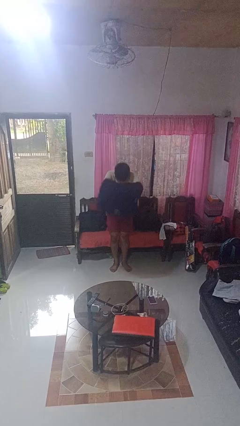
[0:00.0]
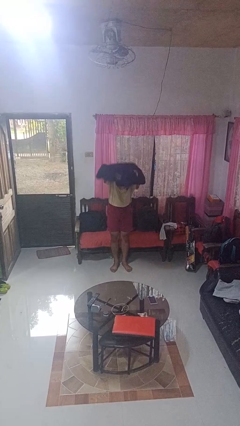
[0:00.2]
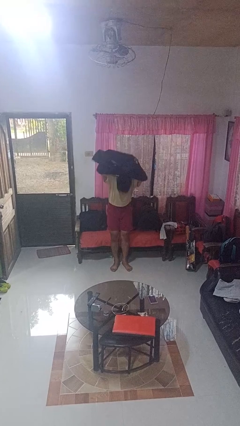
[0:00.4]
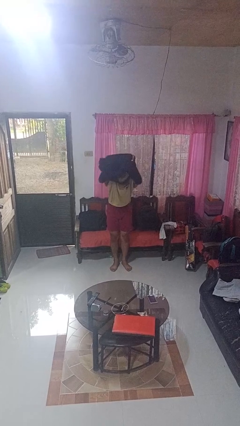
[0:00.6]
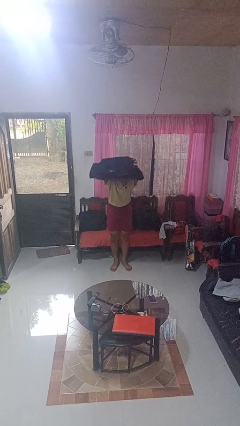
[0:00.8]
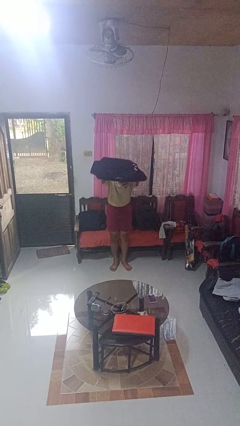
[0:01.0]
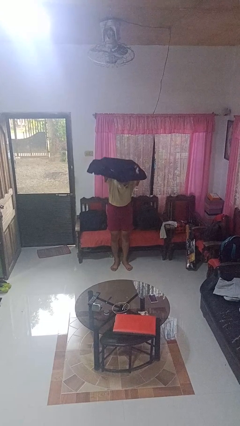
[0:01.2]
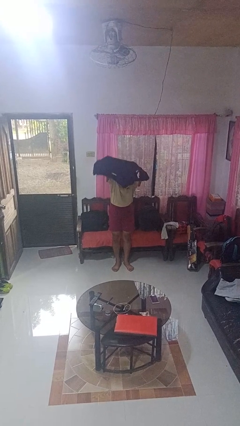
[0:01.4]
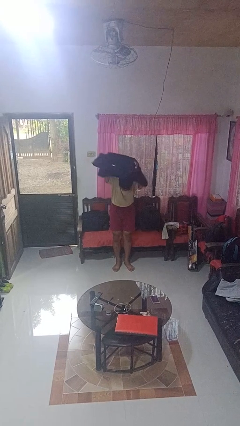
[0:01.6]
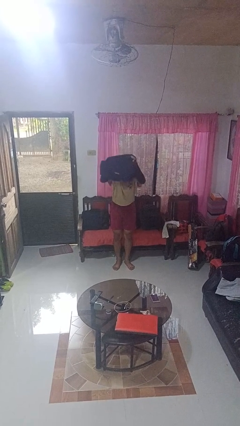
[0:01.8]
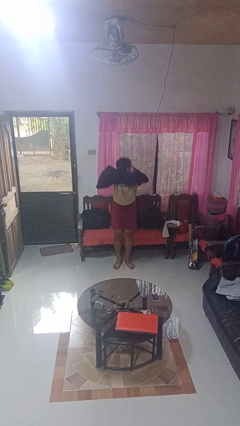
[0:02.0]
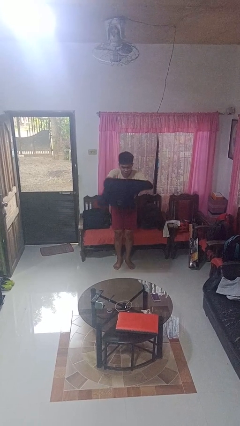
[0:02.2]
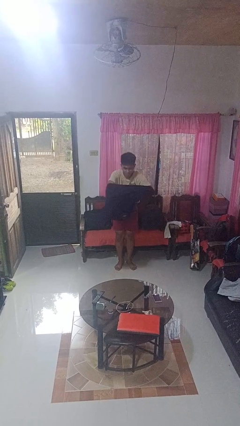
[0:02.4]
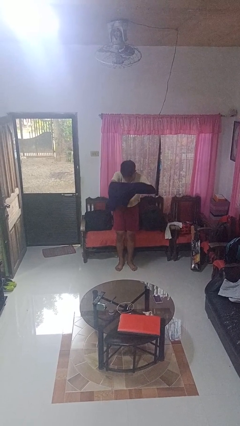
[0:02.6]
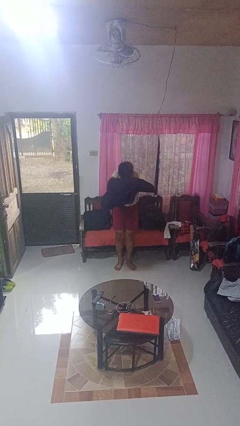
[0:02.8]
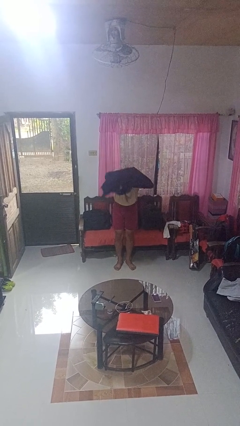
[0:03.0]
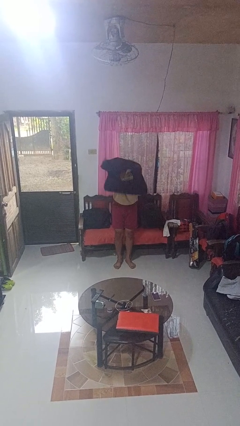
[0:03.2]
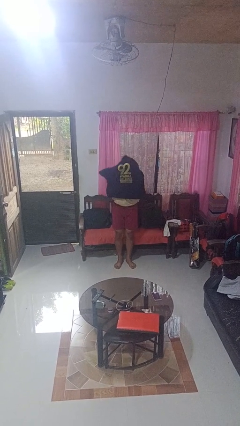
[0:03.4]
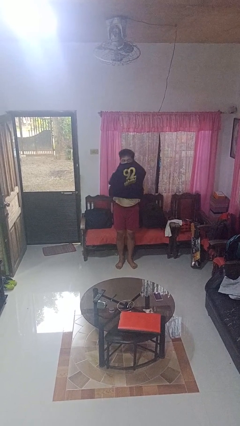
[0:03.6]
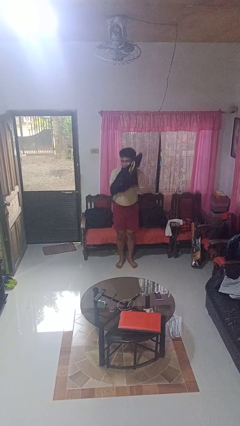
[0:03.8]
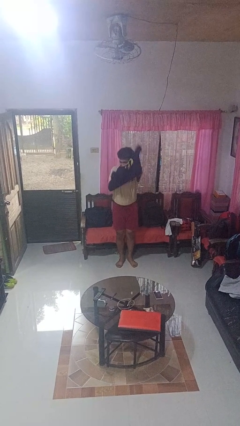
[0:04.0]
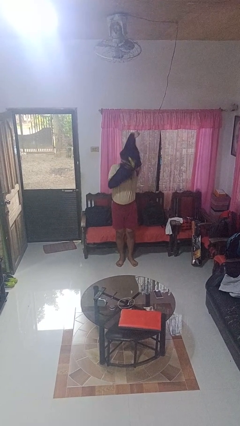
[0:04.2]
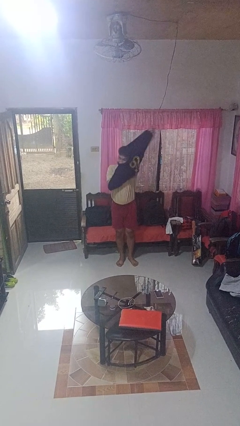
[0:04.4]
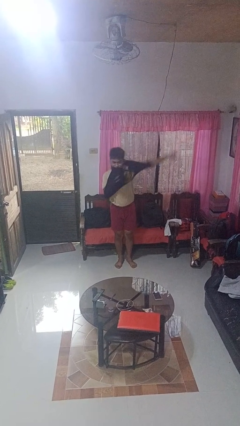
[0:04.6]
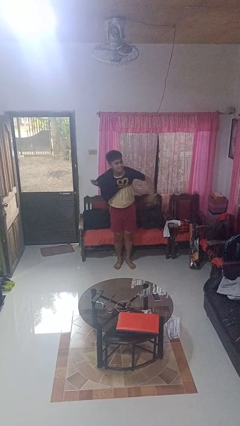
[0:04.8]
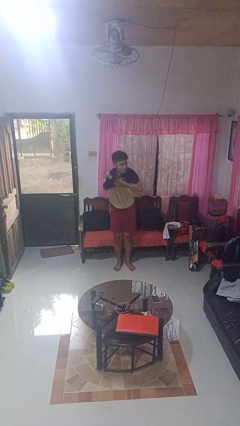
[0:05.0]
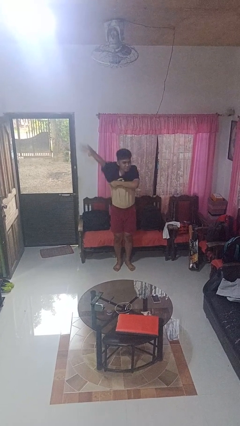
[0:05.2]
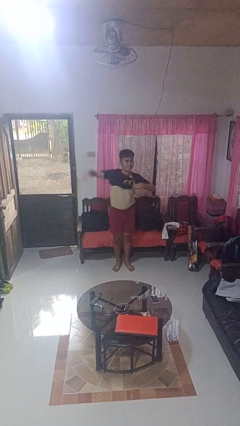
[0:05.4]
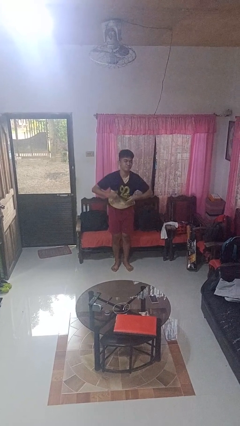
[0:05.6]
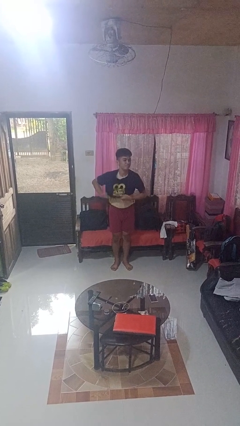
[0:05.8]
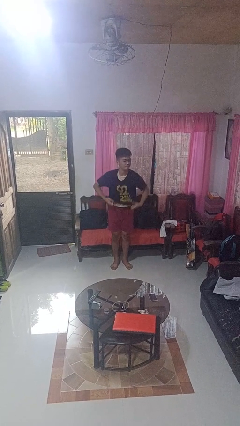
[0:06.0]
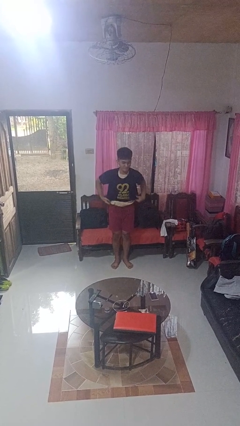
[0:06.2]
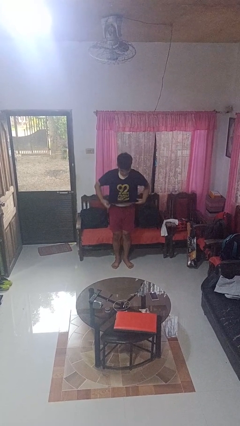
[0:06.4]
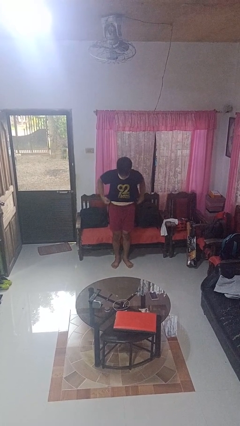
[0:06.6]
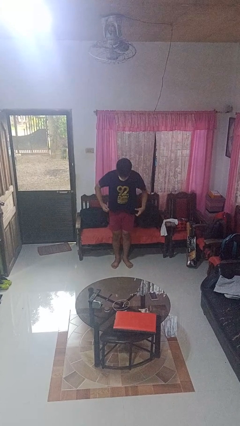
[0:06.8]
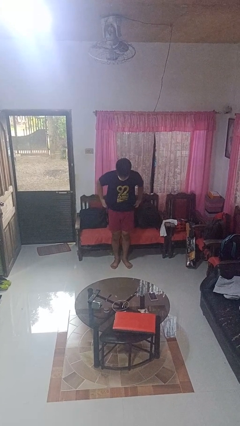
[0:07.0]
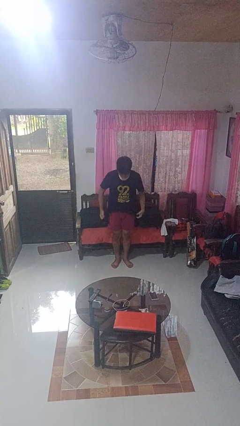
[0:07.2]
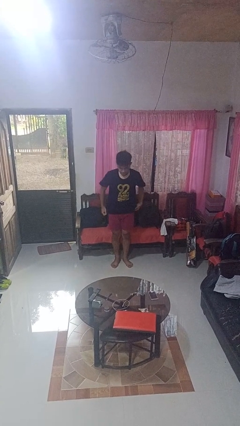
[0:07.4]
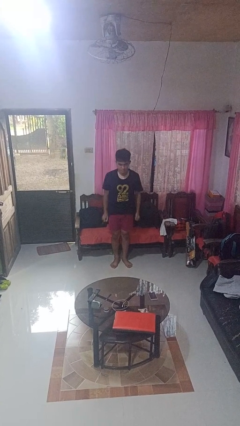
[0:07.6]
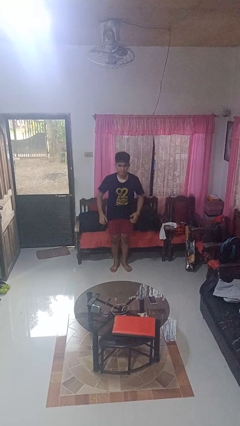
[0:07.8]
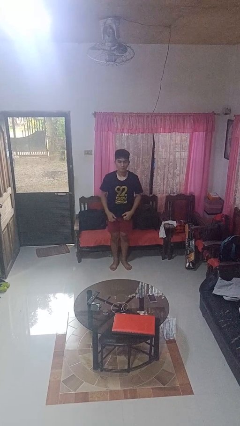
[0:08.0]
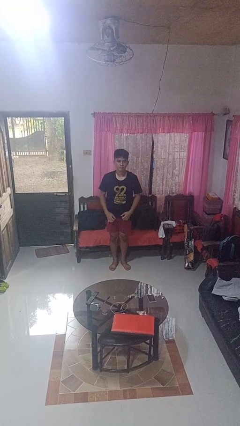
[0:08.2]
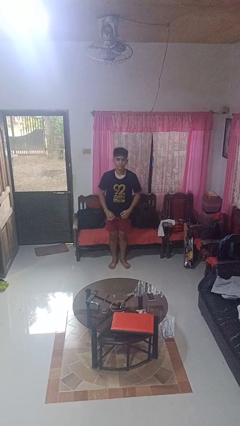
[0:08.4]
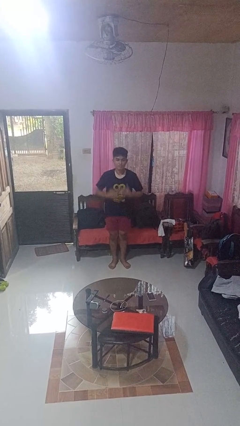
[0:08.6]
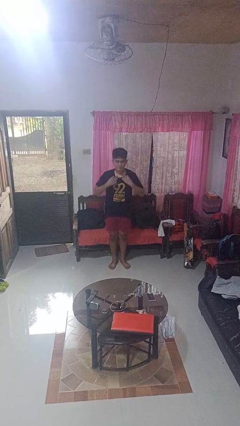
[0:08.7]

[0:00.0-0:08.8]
person puts on shirt

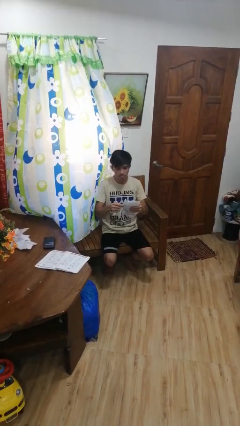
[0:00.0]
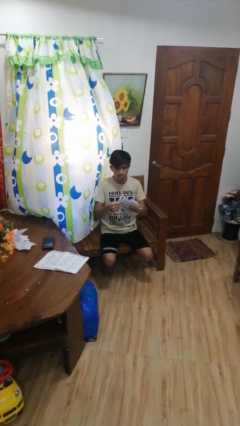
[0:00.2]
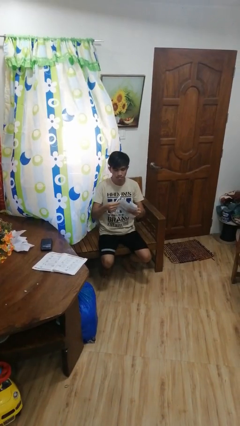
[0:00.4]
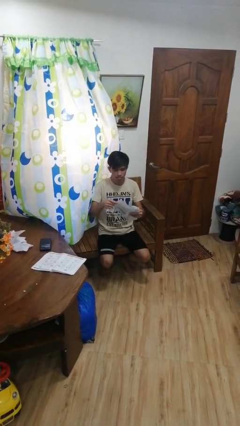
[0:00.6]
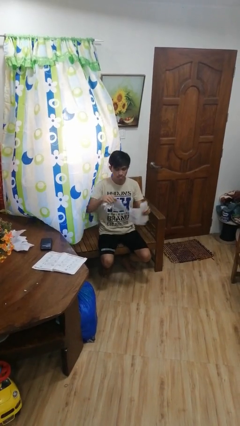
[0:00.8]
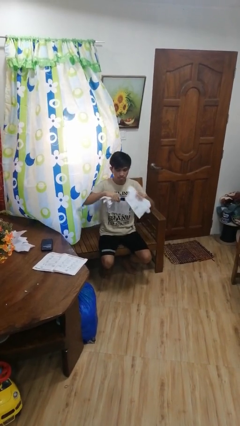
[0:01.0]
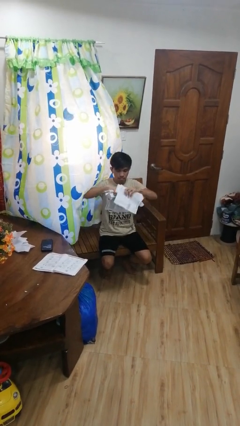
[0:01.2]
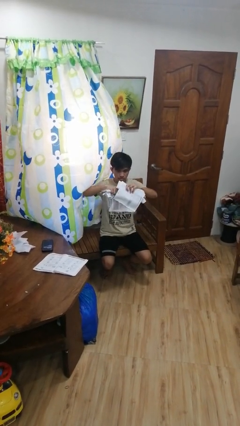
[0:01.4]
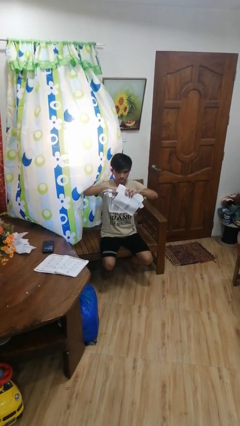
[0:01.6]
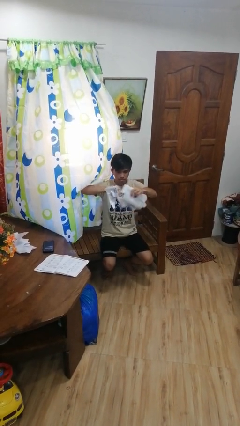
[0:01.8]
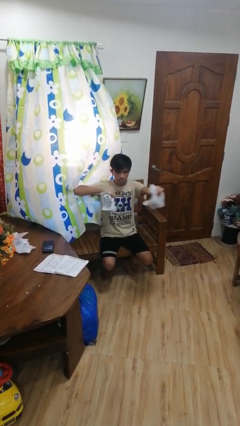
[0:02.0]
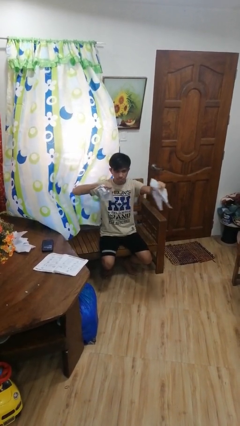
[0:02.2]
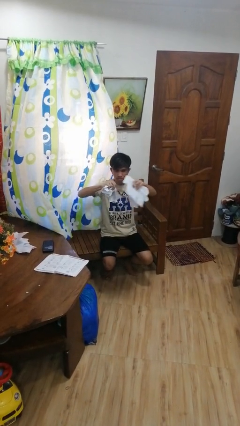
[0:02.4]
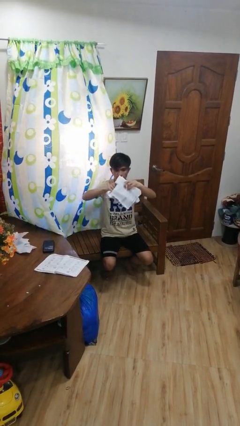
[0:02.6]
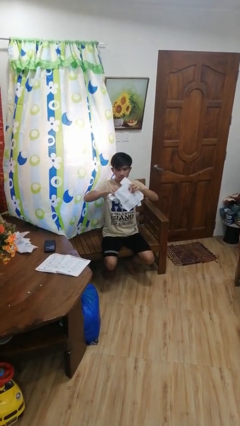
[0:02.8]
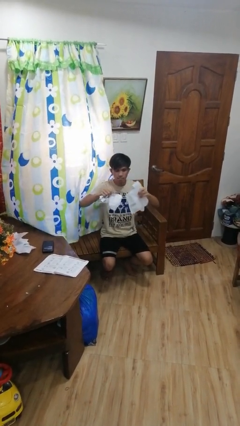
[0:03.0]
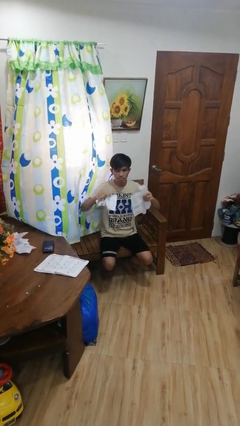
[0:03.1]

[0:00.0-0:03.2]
person tears paper

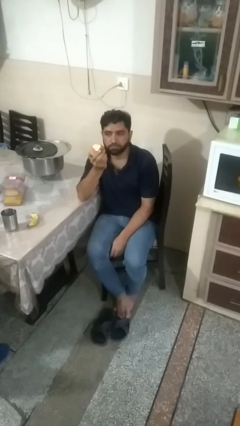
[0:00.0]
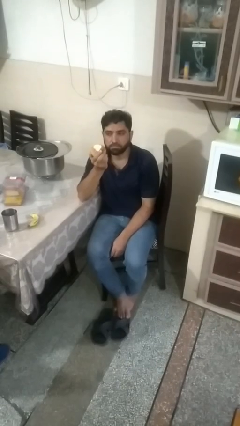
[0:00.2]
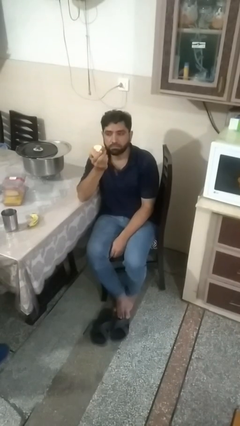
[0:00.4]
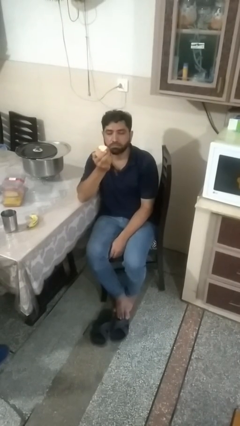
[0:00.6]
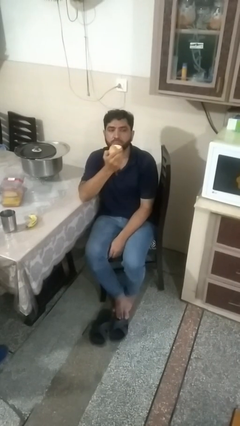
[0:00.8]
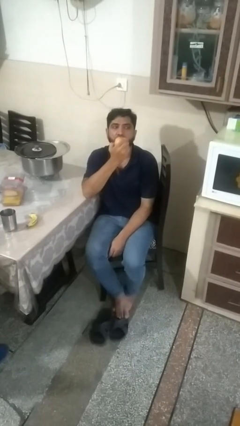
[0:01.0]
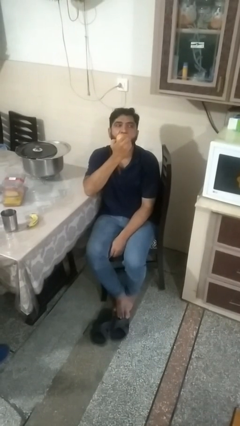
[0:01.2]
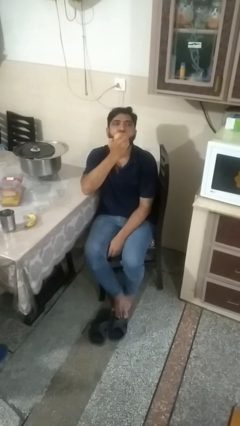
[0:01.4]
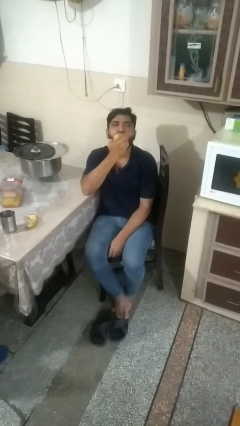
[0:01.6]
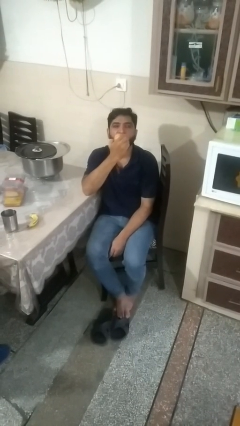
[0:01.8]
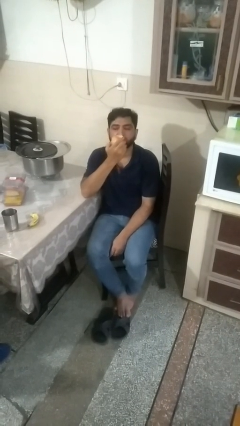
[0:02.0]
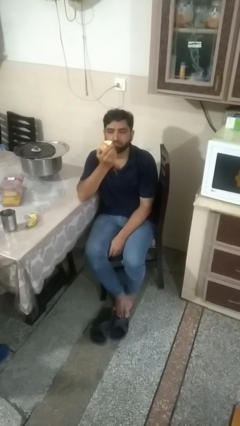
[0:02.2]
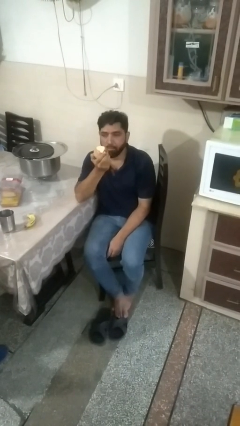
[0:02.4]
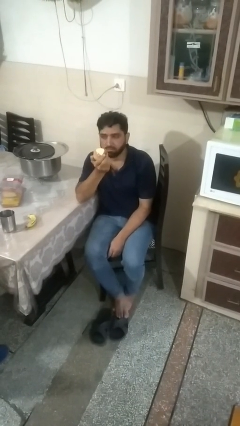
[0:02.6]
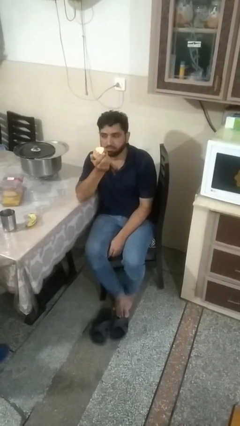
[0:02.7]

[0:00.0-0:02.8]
person eats apple

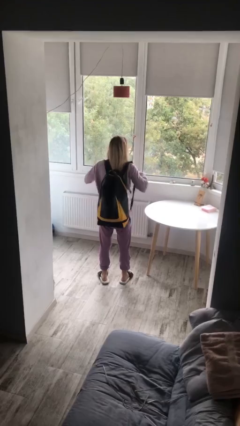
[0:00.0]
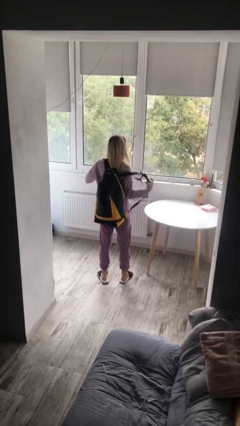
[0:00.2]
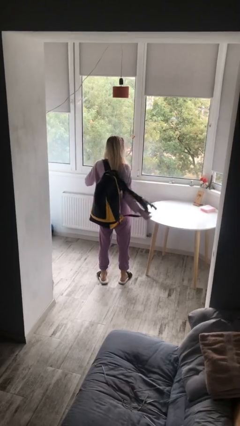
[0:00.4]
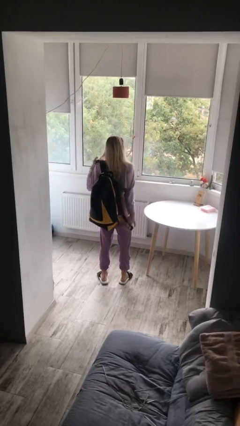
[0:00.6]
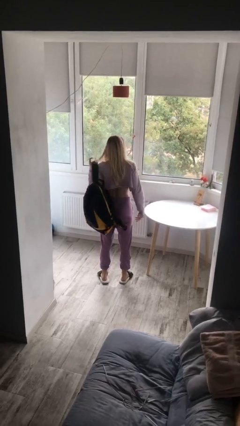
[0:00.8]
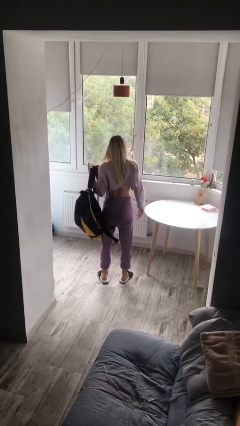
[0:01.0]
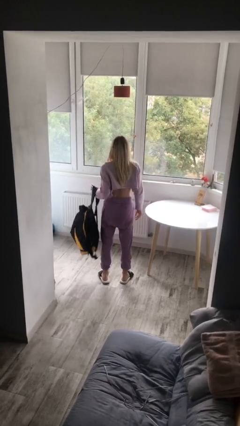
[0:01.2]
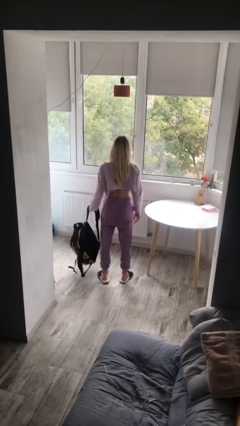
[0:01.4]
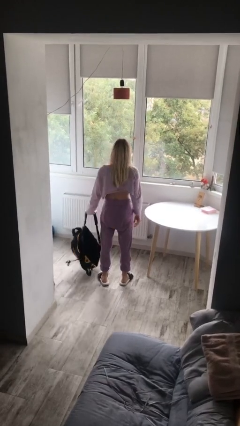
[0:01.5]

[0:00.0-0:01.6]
person takes off backpack

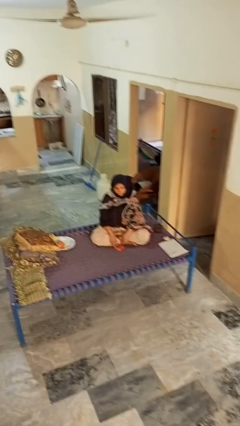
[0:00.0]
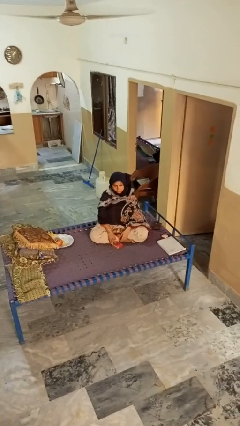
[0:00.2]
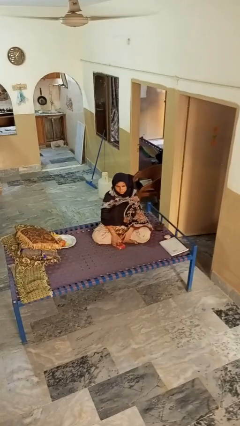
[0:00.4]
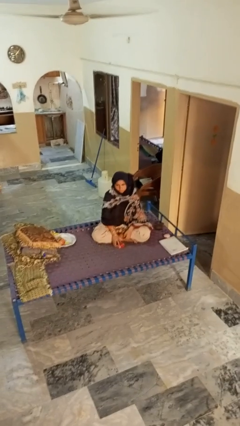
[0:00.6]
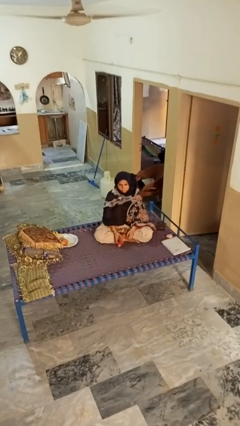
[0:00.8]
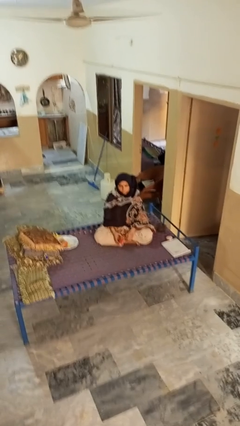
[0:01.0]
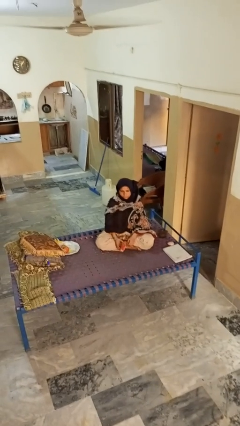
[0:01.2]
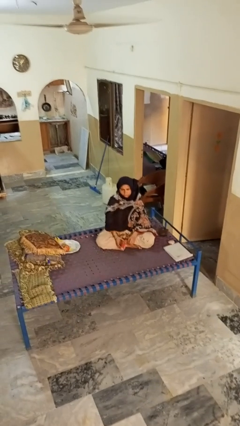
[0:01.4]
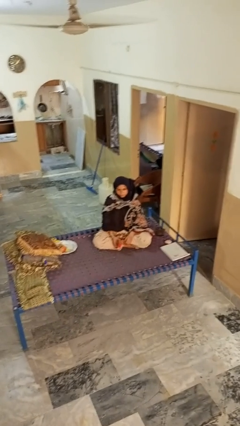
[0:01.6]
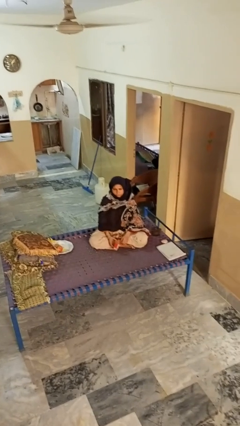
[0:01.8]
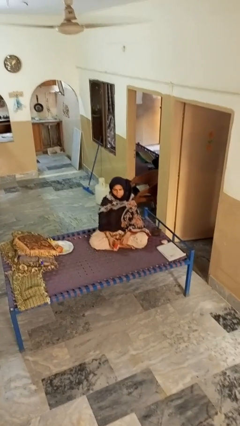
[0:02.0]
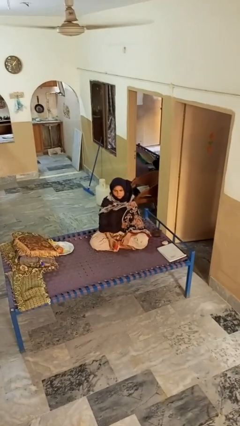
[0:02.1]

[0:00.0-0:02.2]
person picks up object from floor
